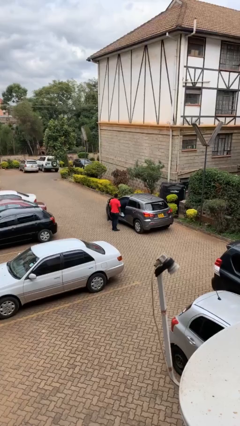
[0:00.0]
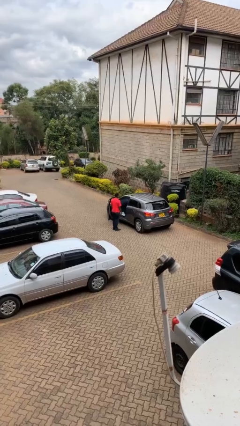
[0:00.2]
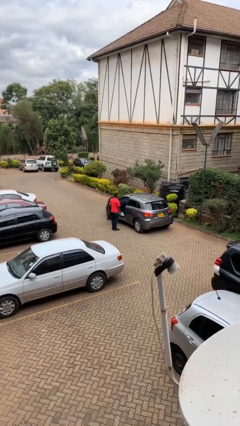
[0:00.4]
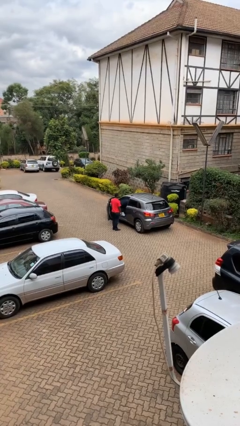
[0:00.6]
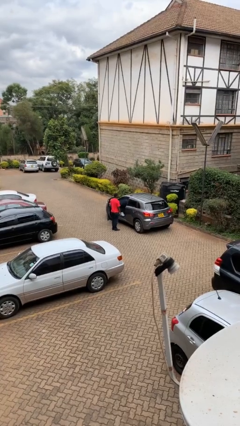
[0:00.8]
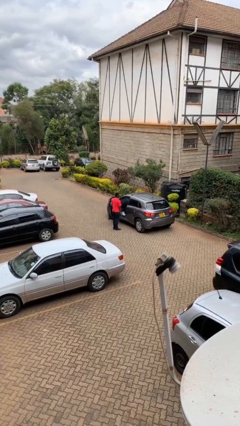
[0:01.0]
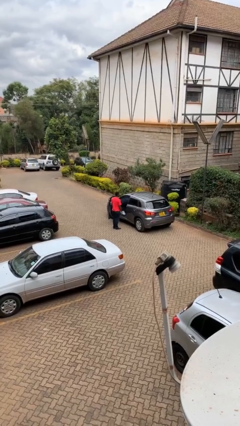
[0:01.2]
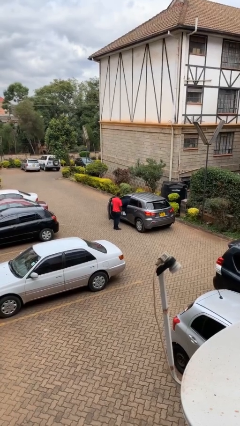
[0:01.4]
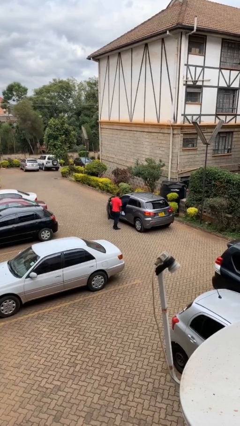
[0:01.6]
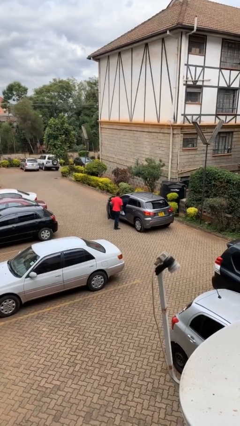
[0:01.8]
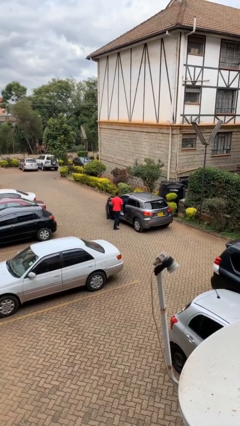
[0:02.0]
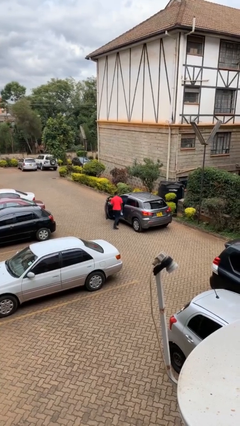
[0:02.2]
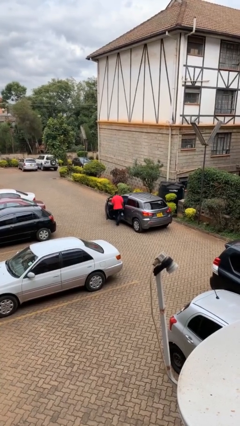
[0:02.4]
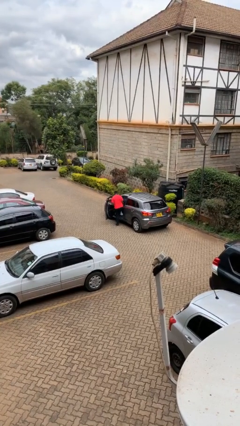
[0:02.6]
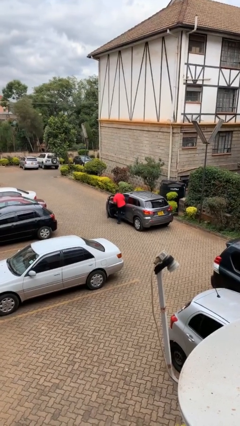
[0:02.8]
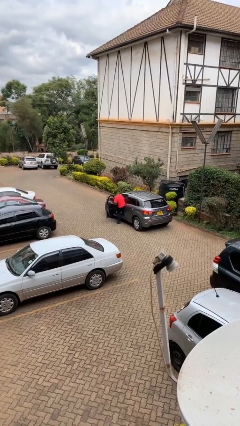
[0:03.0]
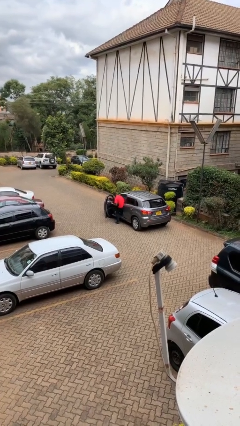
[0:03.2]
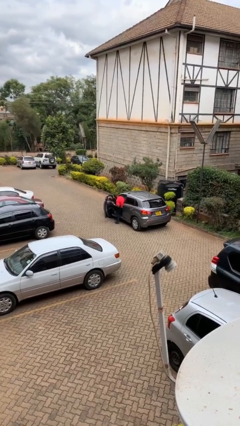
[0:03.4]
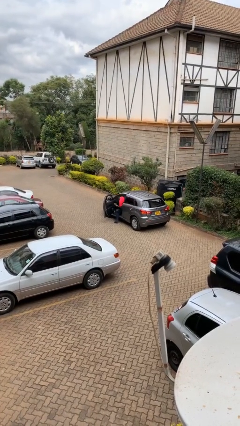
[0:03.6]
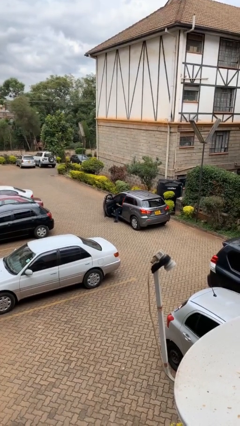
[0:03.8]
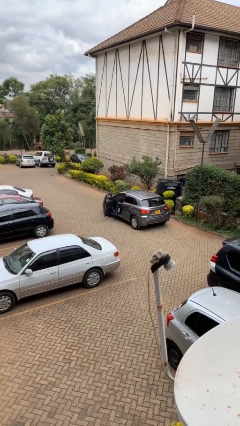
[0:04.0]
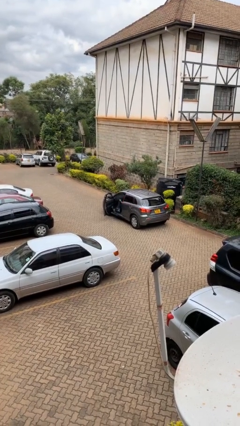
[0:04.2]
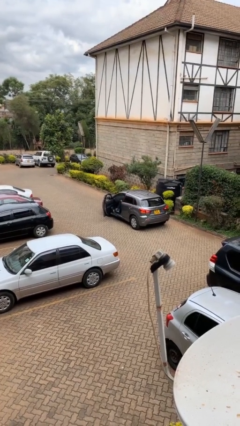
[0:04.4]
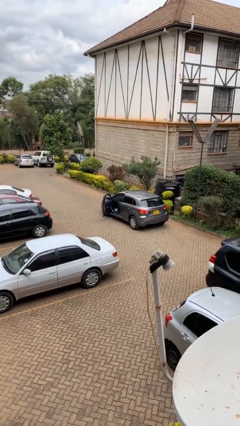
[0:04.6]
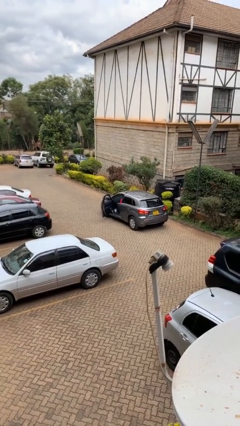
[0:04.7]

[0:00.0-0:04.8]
person enters car

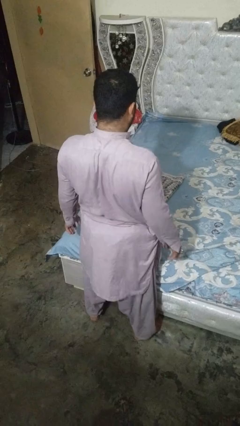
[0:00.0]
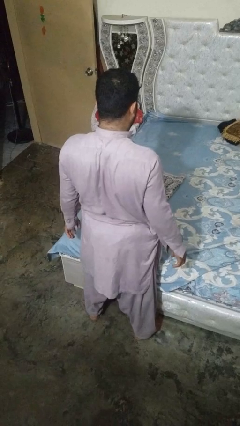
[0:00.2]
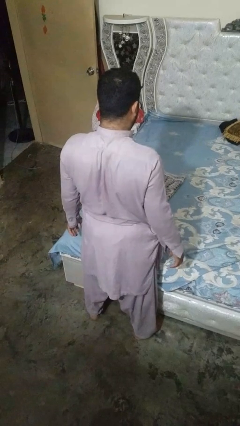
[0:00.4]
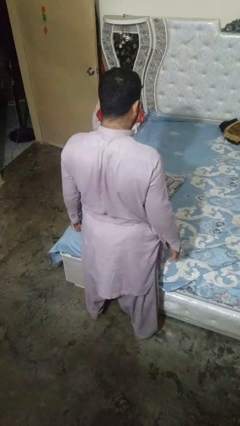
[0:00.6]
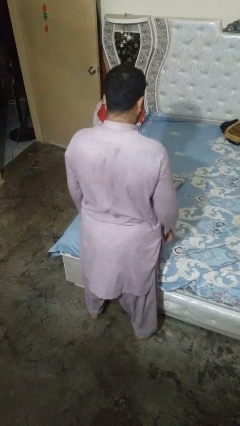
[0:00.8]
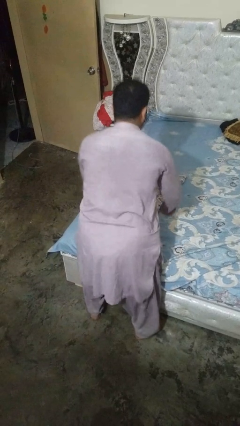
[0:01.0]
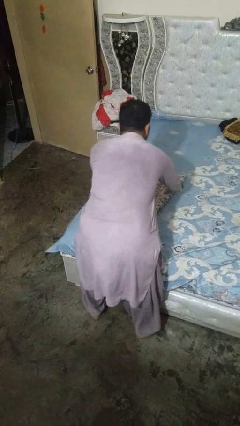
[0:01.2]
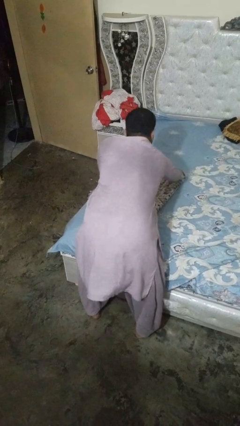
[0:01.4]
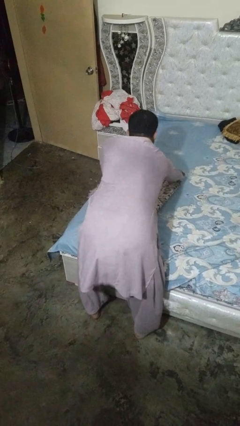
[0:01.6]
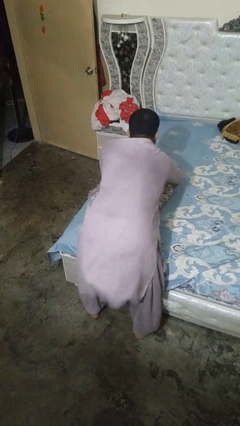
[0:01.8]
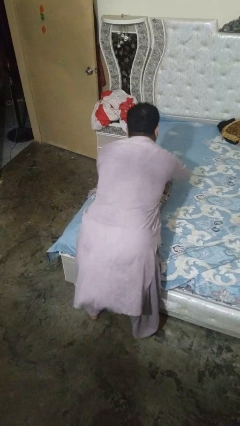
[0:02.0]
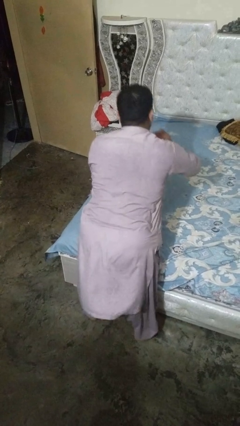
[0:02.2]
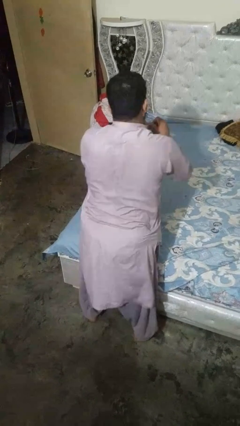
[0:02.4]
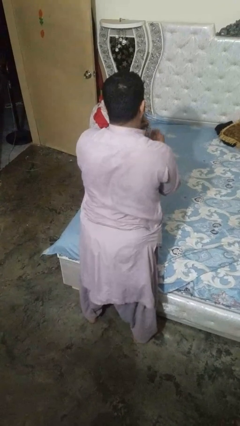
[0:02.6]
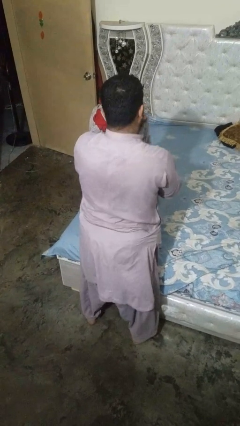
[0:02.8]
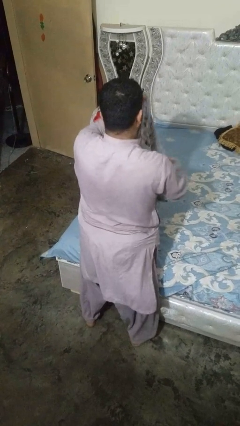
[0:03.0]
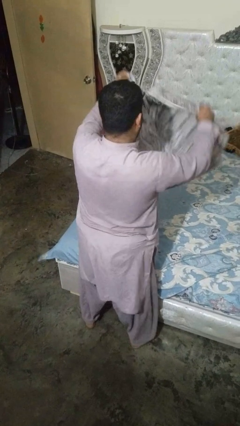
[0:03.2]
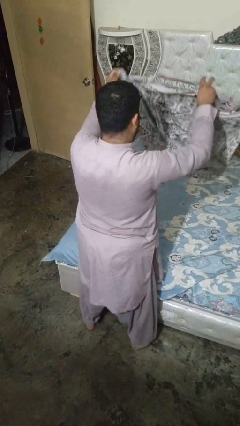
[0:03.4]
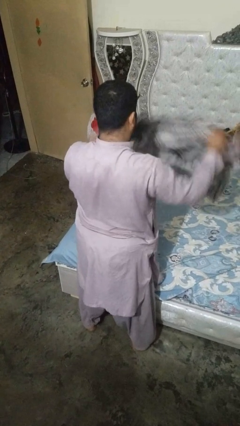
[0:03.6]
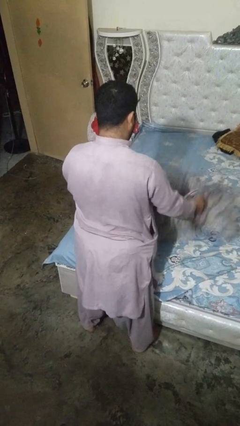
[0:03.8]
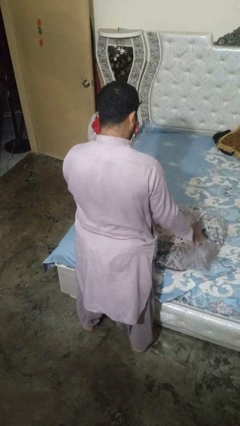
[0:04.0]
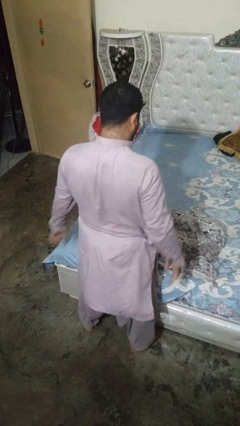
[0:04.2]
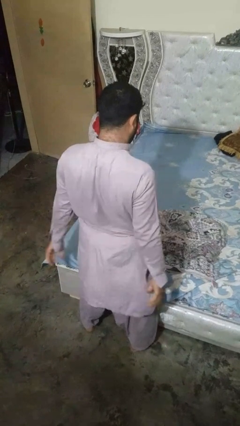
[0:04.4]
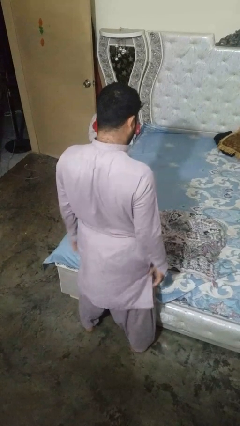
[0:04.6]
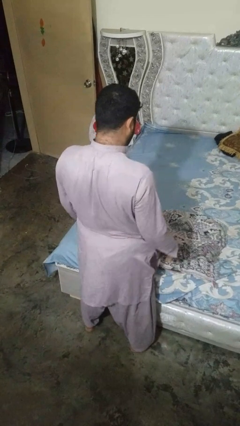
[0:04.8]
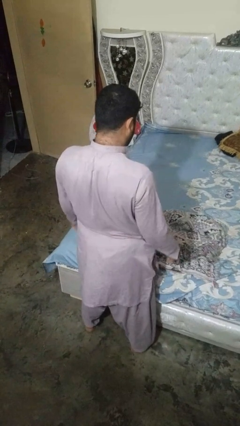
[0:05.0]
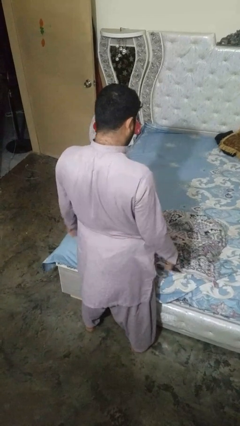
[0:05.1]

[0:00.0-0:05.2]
person unfolds blanket

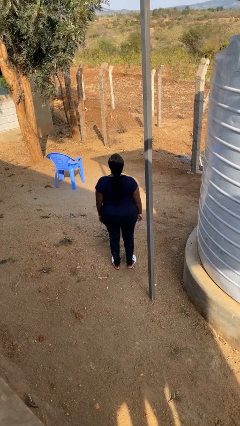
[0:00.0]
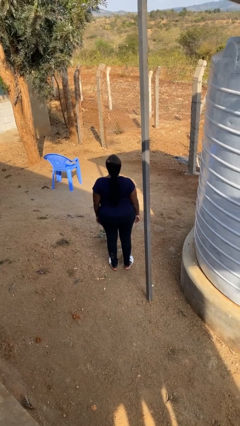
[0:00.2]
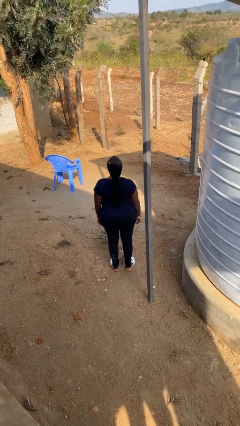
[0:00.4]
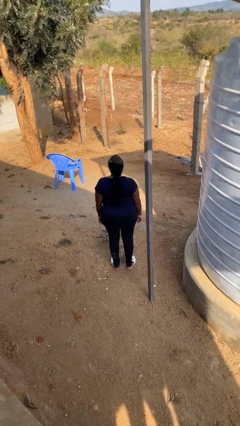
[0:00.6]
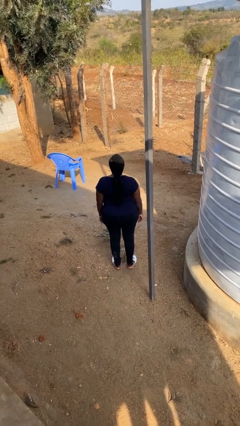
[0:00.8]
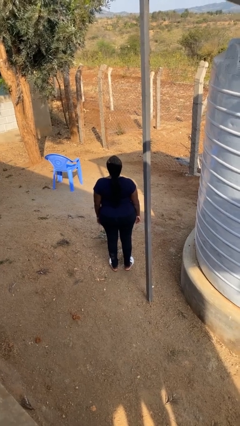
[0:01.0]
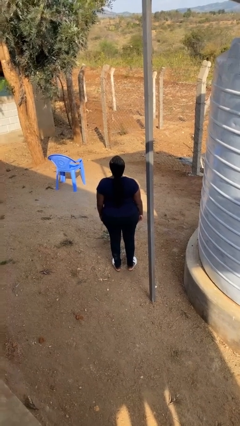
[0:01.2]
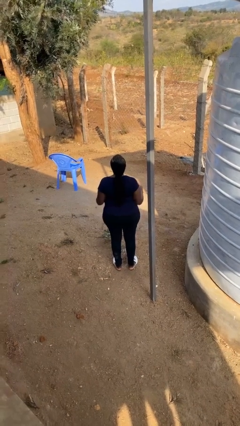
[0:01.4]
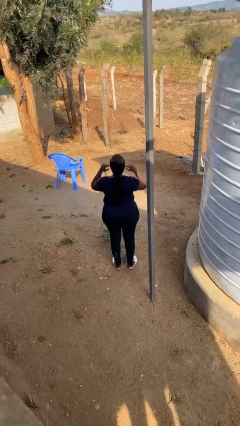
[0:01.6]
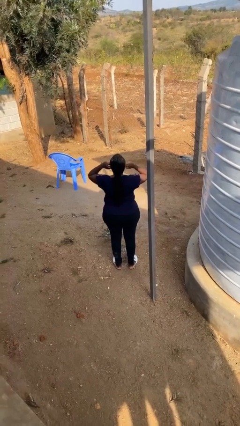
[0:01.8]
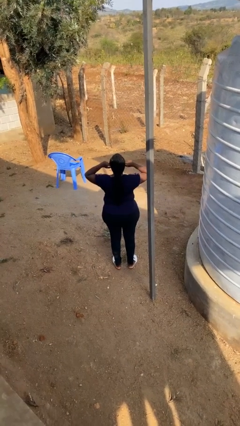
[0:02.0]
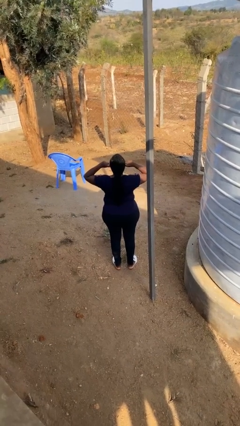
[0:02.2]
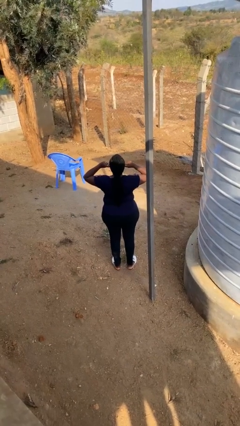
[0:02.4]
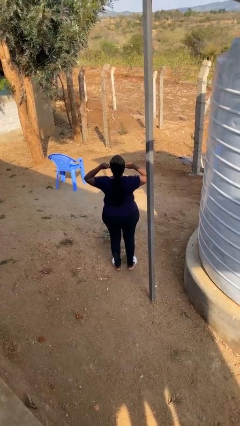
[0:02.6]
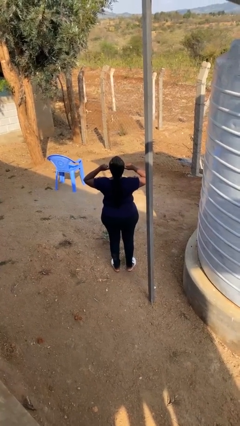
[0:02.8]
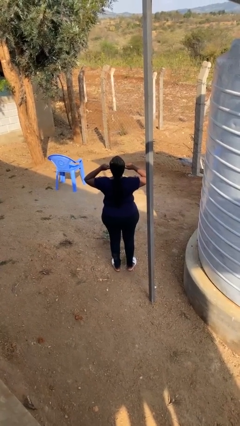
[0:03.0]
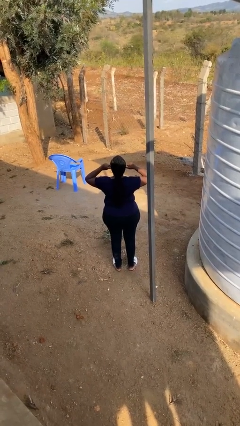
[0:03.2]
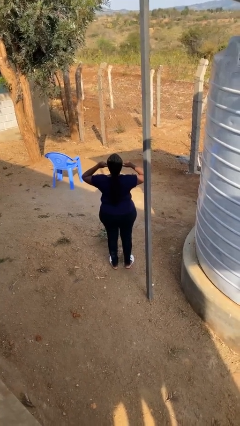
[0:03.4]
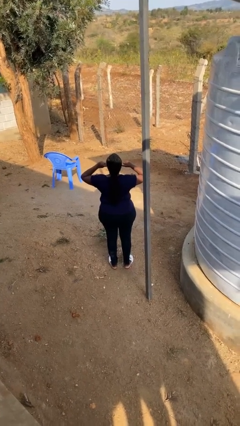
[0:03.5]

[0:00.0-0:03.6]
person puts fingers in ear

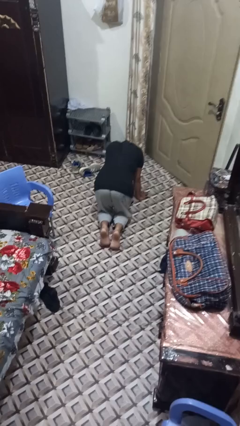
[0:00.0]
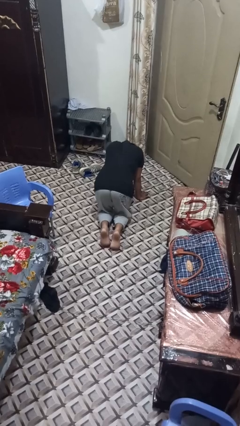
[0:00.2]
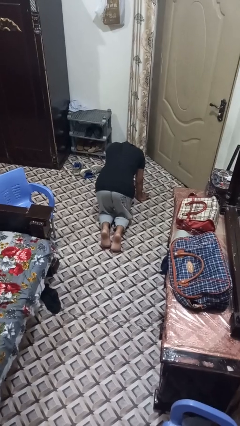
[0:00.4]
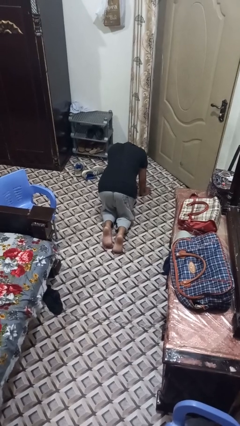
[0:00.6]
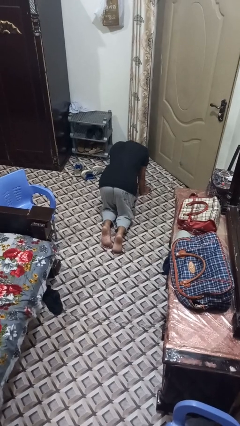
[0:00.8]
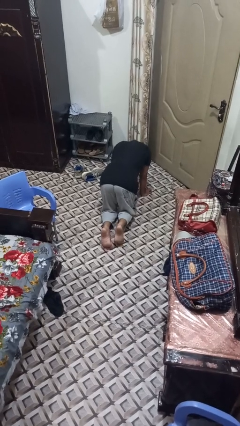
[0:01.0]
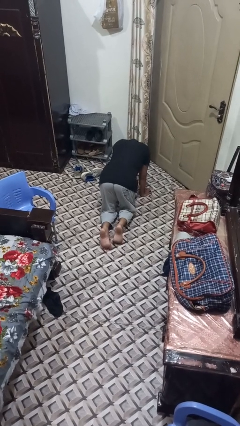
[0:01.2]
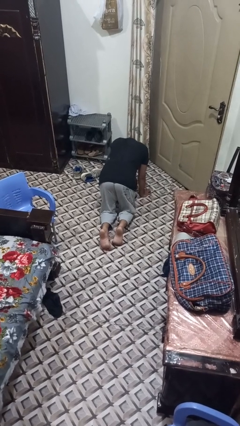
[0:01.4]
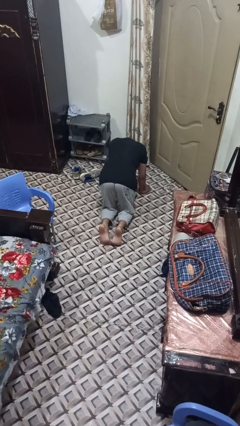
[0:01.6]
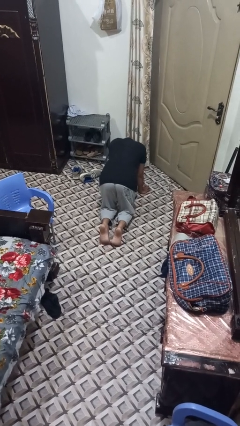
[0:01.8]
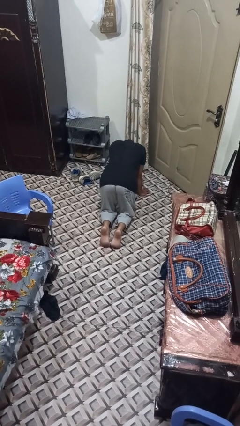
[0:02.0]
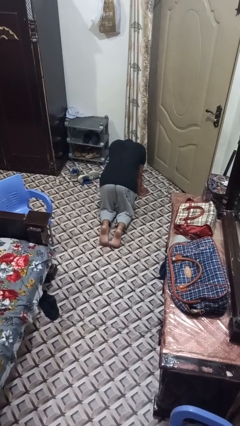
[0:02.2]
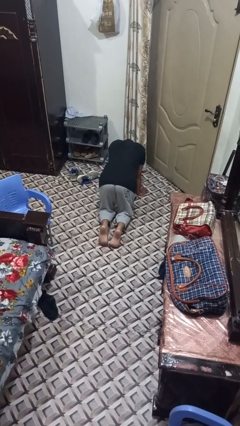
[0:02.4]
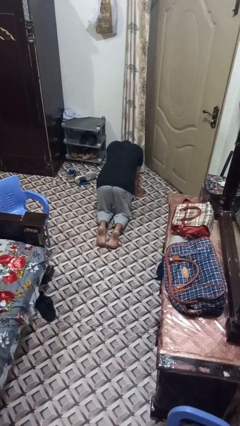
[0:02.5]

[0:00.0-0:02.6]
person crawls

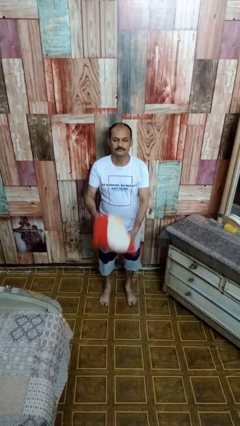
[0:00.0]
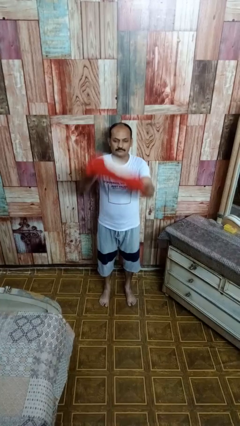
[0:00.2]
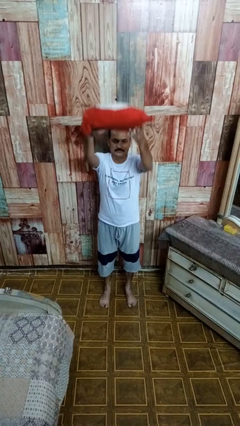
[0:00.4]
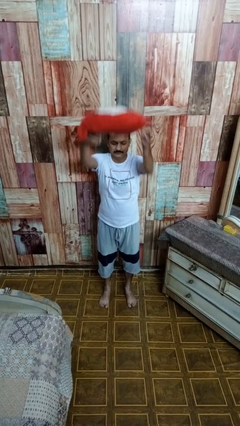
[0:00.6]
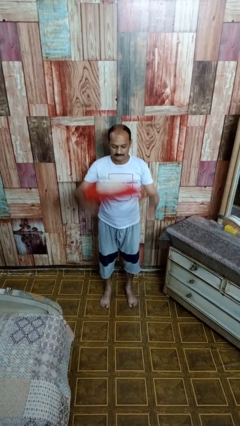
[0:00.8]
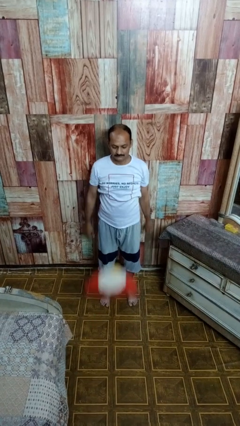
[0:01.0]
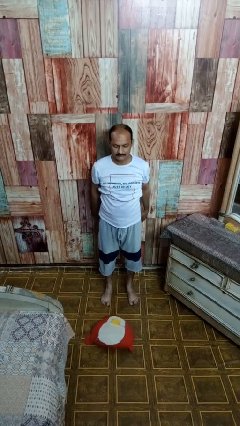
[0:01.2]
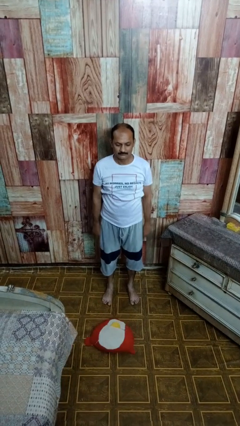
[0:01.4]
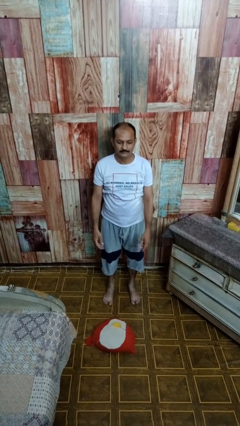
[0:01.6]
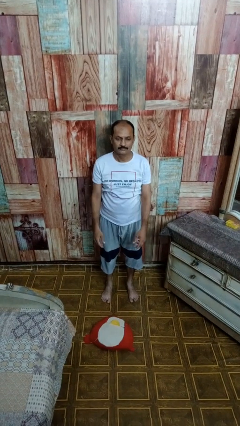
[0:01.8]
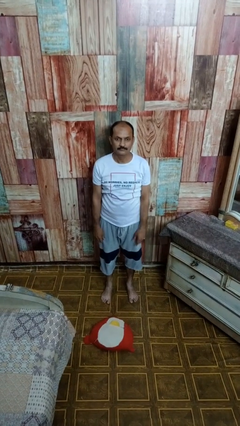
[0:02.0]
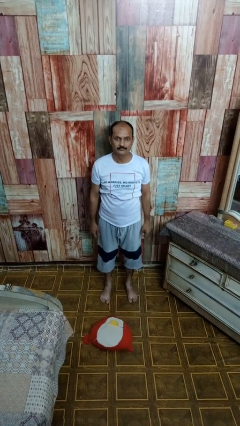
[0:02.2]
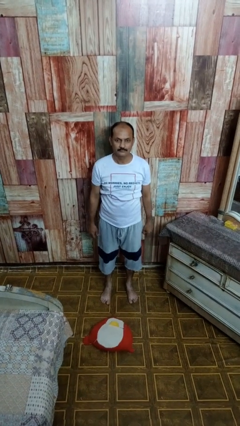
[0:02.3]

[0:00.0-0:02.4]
person throws object into air
